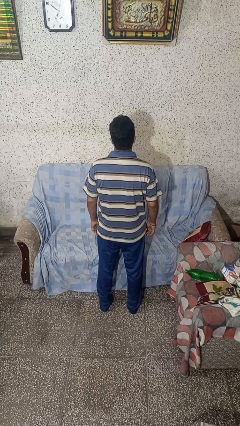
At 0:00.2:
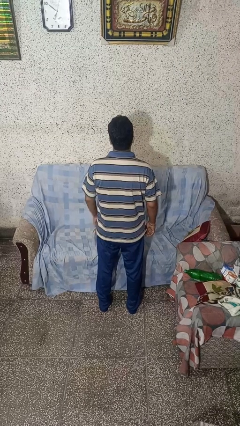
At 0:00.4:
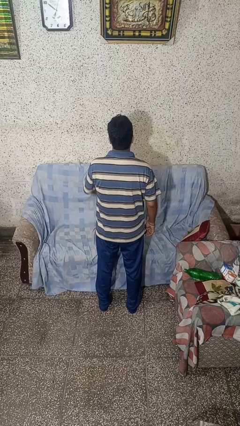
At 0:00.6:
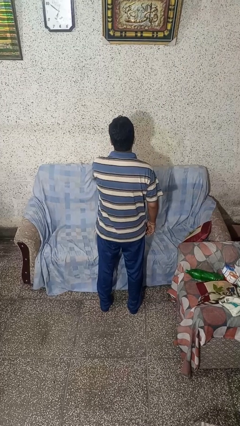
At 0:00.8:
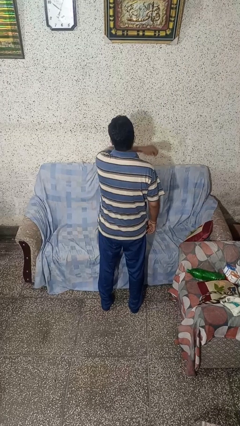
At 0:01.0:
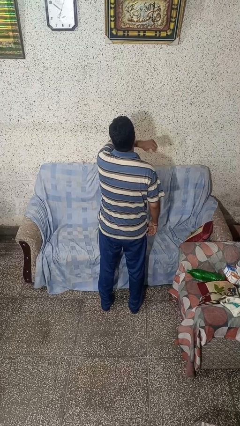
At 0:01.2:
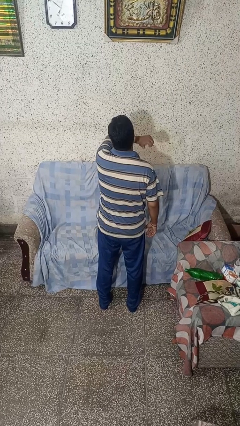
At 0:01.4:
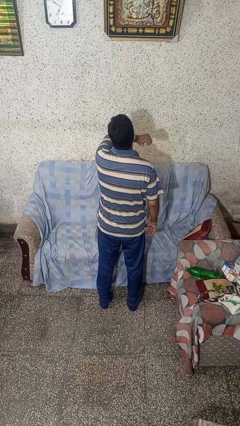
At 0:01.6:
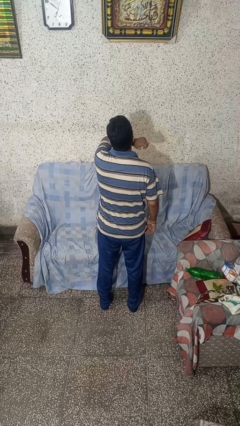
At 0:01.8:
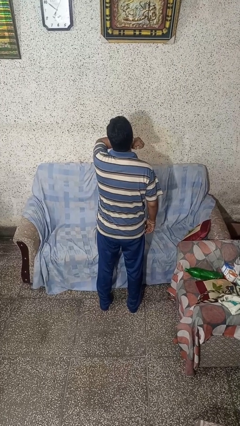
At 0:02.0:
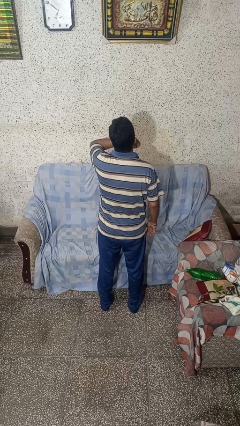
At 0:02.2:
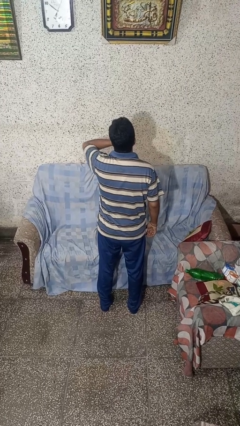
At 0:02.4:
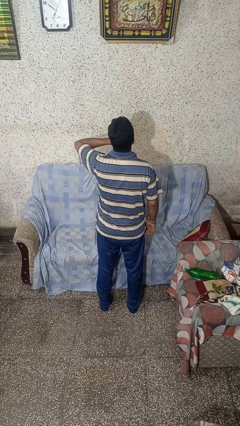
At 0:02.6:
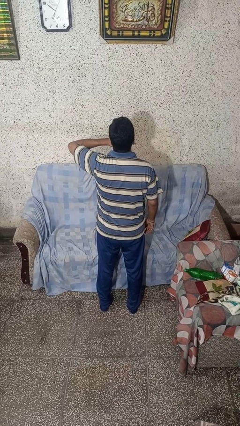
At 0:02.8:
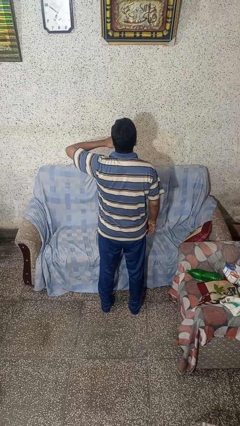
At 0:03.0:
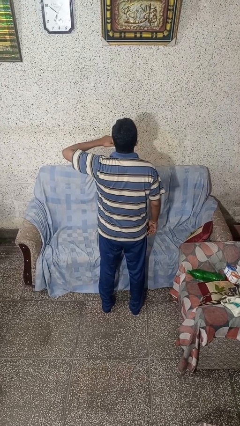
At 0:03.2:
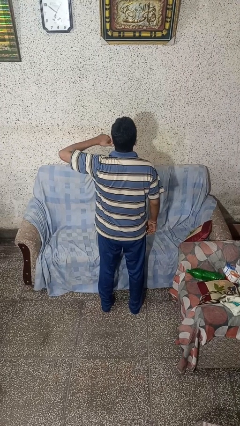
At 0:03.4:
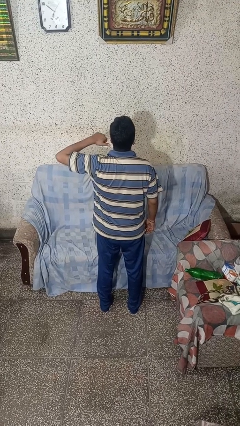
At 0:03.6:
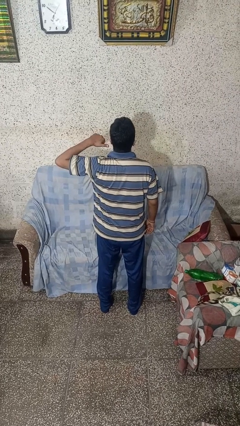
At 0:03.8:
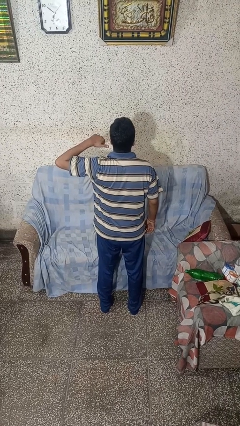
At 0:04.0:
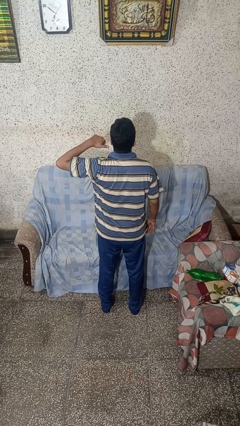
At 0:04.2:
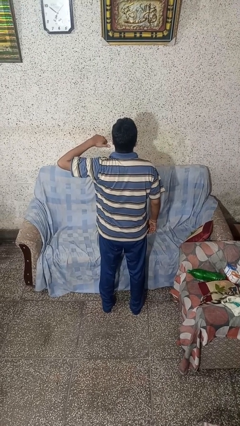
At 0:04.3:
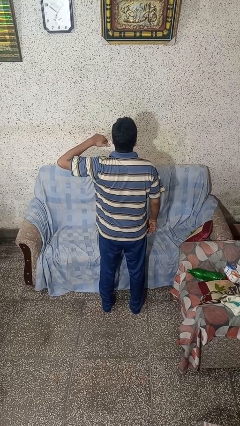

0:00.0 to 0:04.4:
person gestures cut

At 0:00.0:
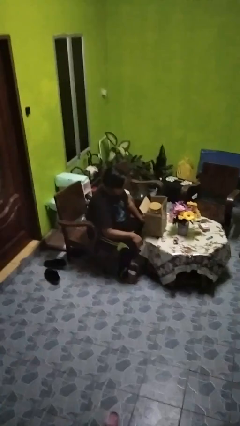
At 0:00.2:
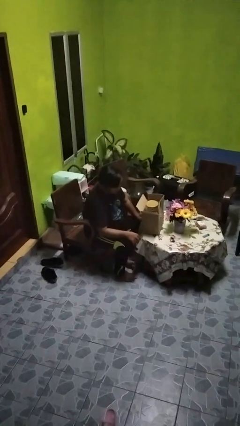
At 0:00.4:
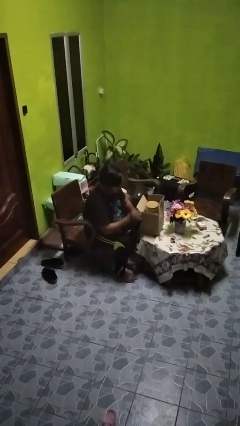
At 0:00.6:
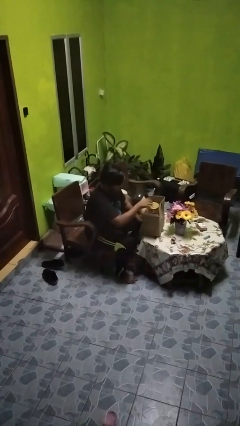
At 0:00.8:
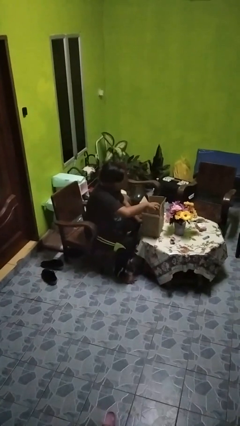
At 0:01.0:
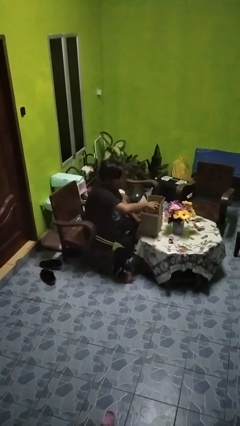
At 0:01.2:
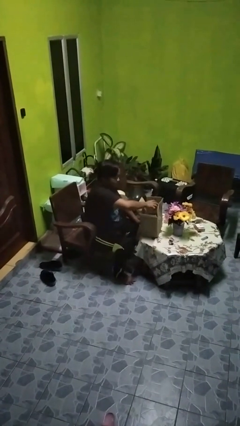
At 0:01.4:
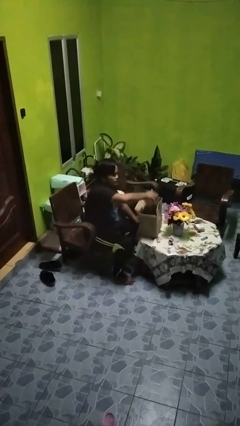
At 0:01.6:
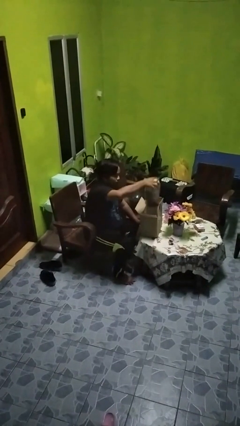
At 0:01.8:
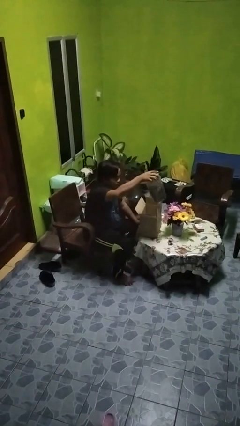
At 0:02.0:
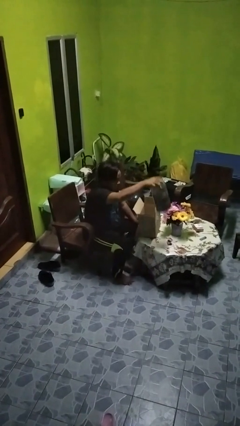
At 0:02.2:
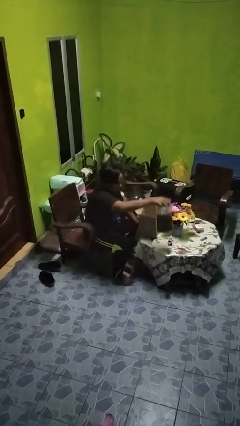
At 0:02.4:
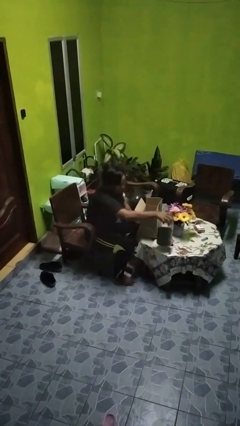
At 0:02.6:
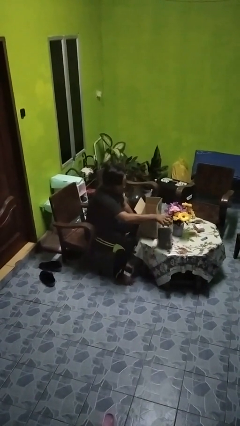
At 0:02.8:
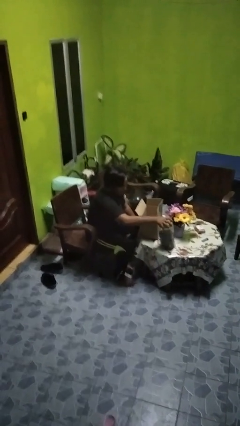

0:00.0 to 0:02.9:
person takes object from box

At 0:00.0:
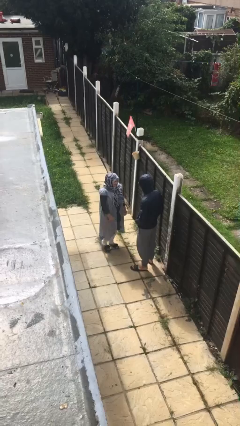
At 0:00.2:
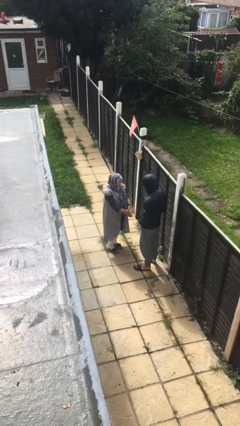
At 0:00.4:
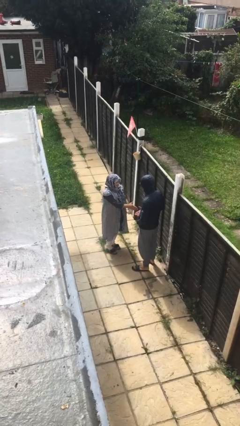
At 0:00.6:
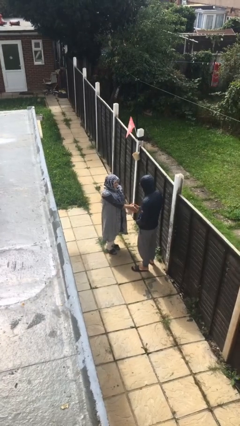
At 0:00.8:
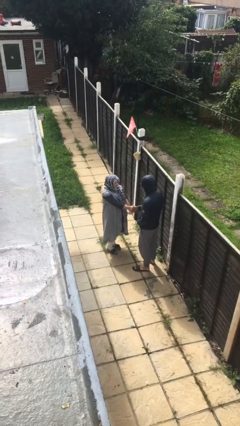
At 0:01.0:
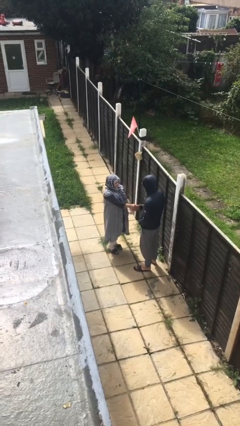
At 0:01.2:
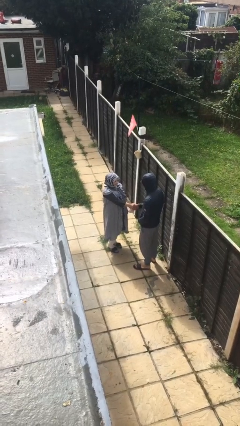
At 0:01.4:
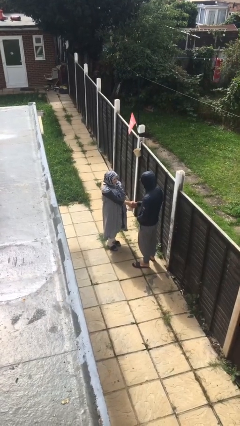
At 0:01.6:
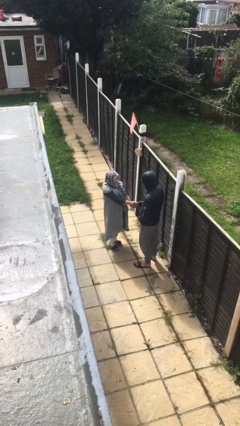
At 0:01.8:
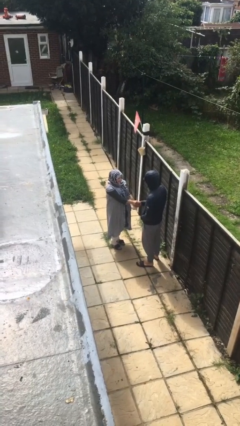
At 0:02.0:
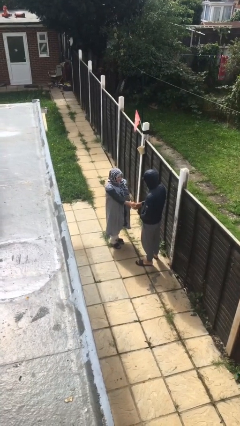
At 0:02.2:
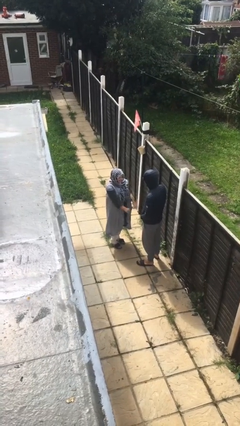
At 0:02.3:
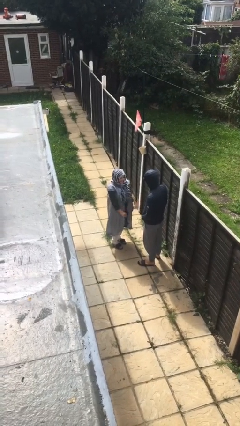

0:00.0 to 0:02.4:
person shakes hand

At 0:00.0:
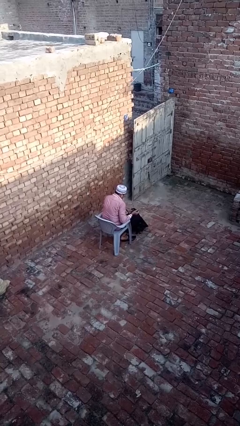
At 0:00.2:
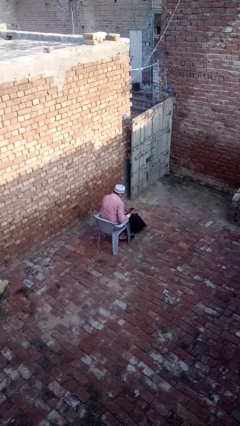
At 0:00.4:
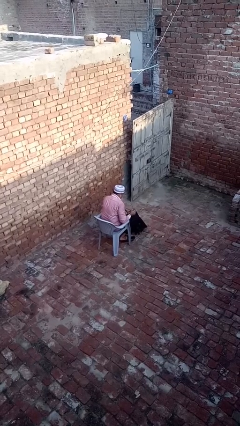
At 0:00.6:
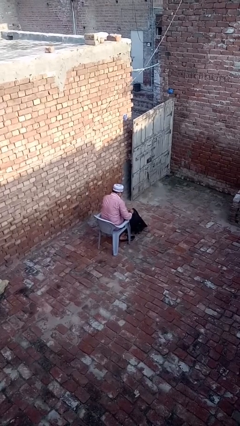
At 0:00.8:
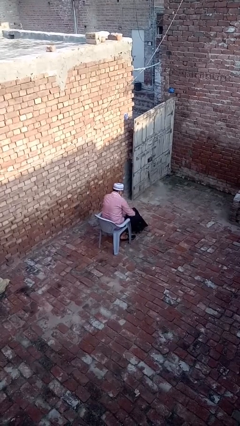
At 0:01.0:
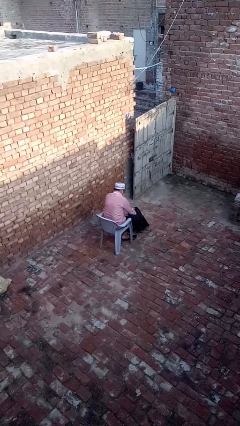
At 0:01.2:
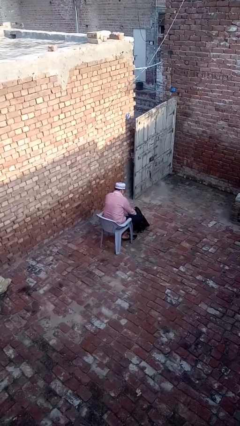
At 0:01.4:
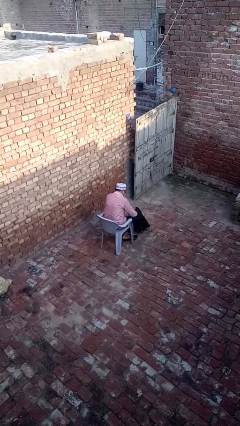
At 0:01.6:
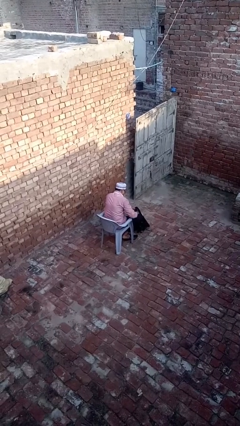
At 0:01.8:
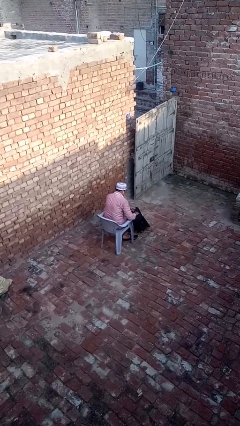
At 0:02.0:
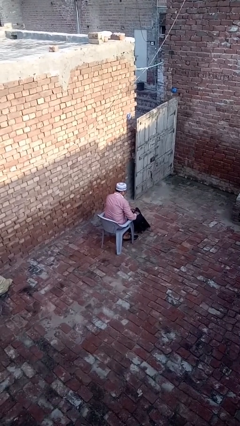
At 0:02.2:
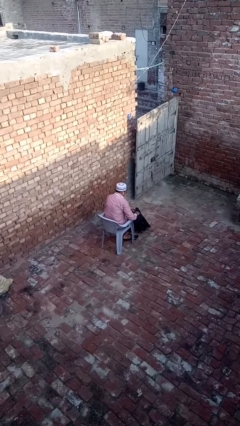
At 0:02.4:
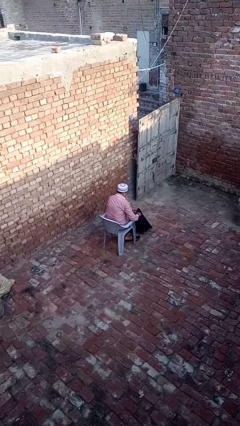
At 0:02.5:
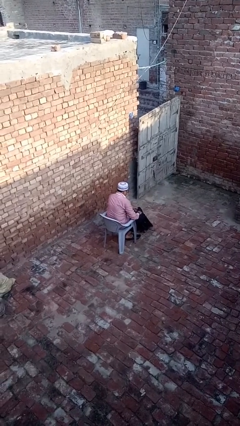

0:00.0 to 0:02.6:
person puts object into backpack

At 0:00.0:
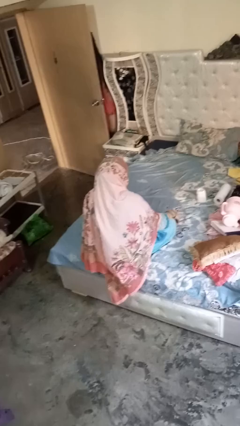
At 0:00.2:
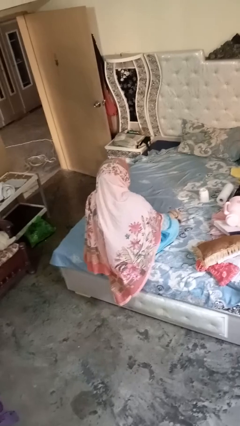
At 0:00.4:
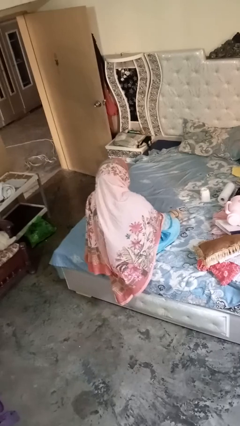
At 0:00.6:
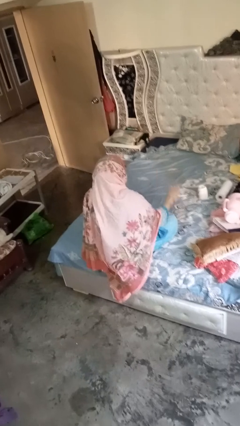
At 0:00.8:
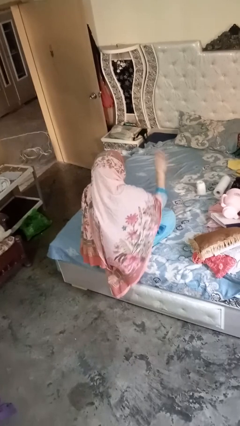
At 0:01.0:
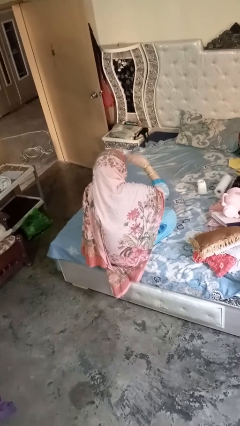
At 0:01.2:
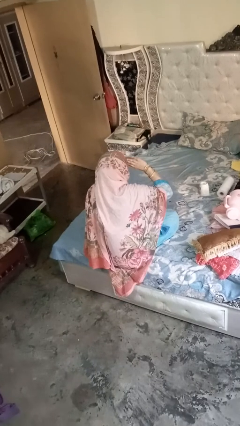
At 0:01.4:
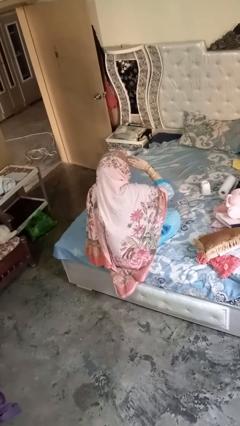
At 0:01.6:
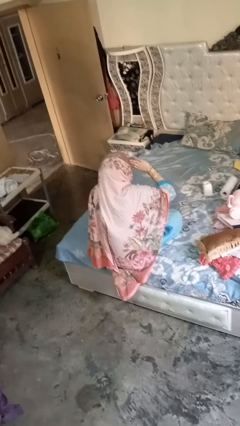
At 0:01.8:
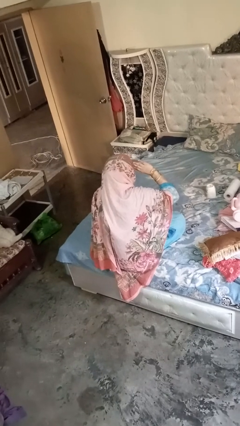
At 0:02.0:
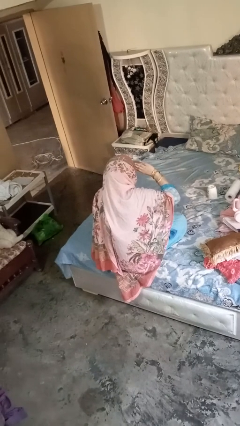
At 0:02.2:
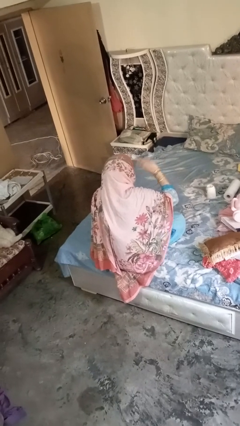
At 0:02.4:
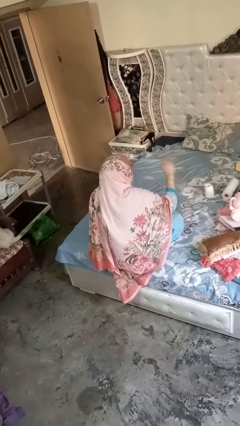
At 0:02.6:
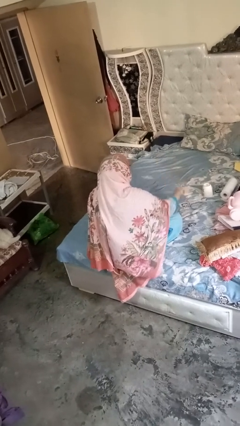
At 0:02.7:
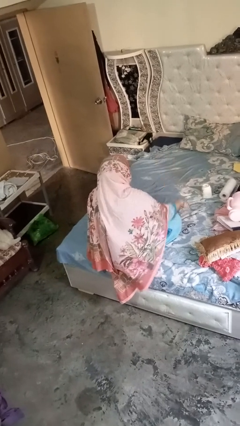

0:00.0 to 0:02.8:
person salutes

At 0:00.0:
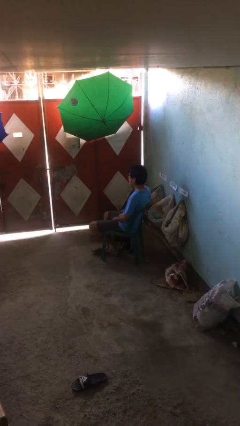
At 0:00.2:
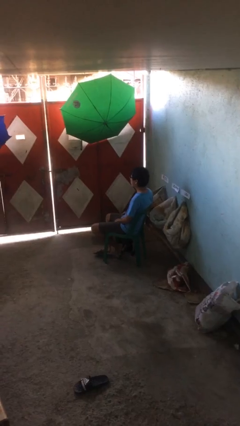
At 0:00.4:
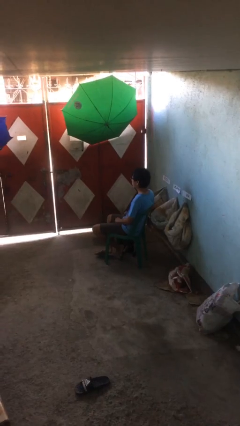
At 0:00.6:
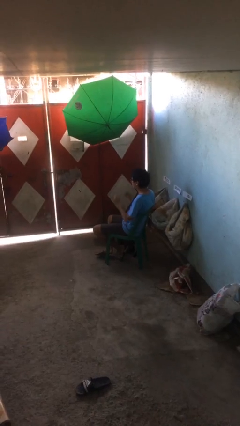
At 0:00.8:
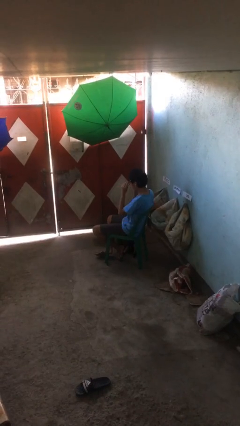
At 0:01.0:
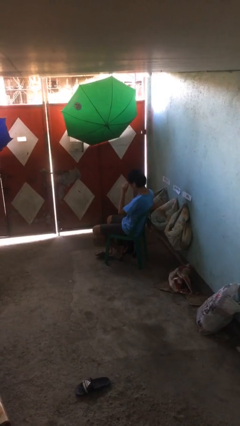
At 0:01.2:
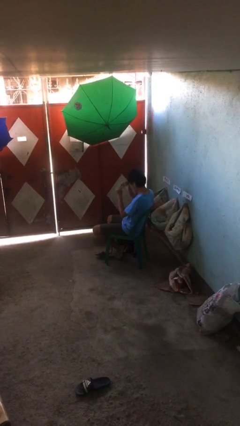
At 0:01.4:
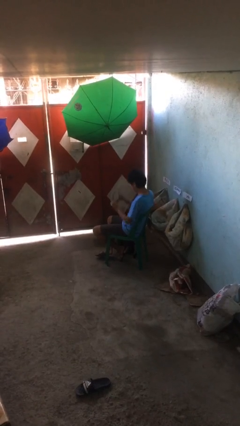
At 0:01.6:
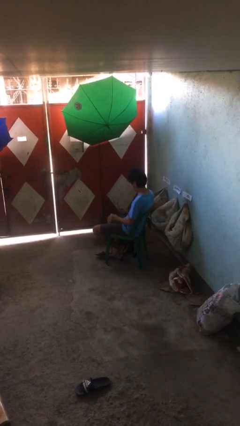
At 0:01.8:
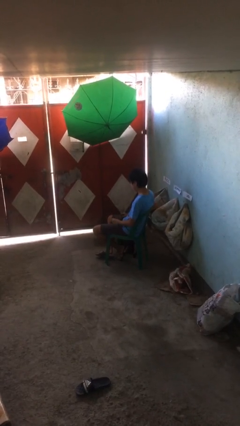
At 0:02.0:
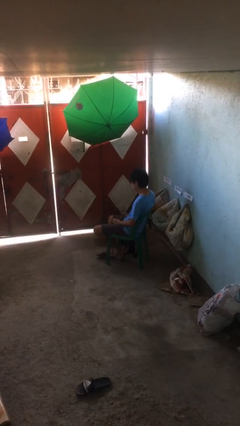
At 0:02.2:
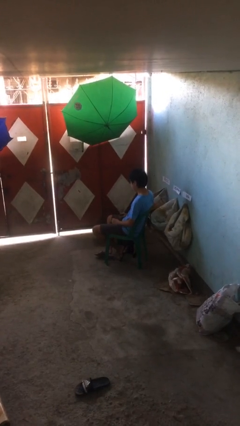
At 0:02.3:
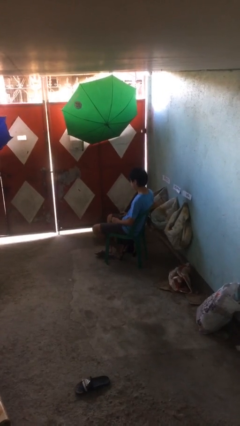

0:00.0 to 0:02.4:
person takes off glasses
